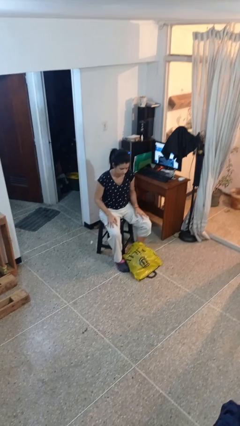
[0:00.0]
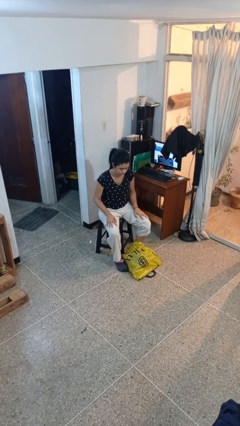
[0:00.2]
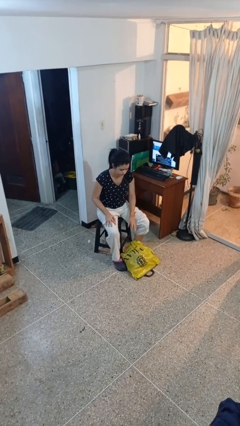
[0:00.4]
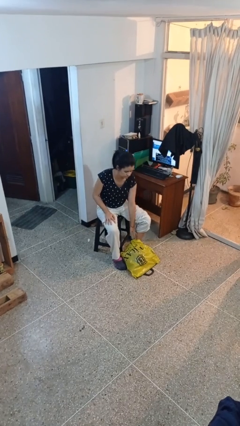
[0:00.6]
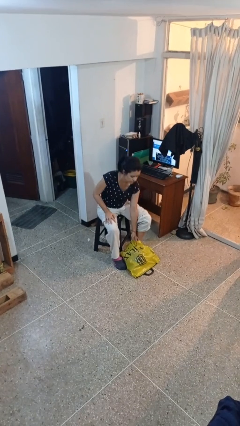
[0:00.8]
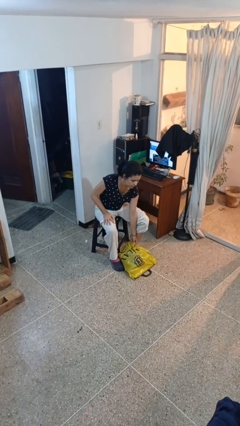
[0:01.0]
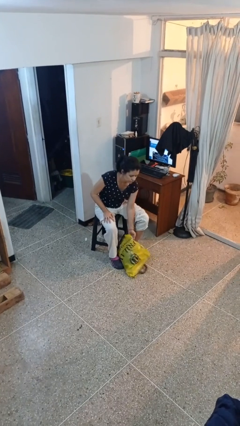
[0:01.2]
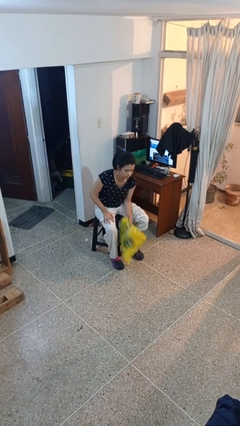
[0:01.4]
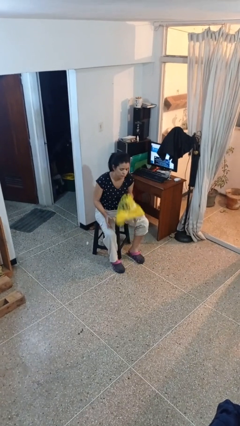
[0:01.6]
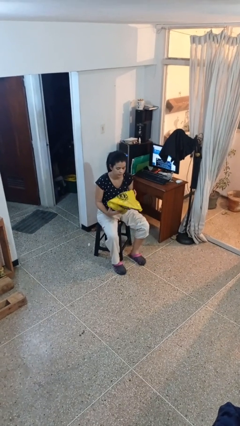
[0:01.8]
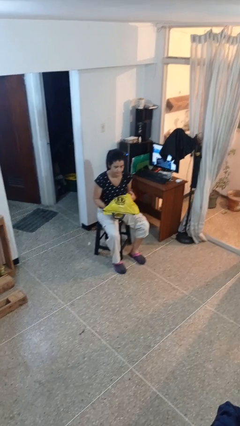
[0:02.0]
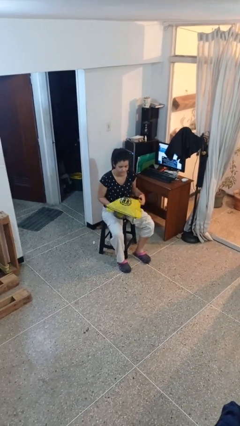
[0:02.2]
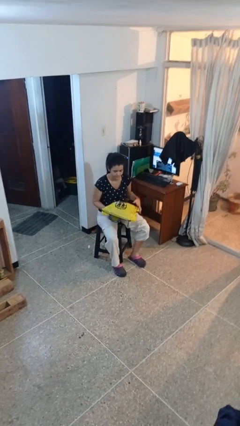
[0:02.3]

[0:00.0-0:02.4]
person picks up object from floor

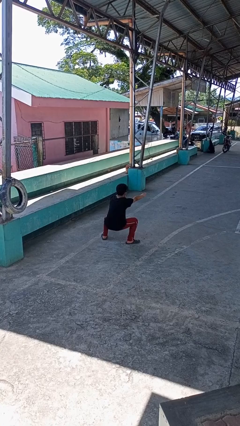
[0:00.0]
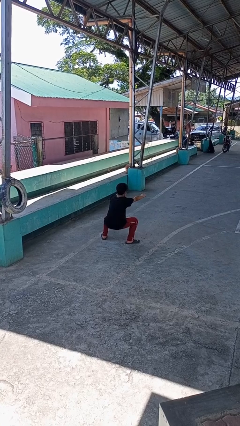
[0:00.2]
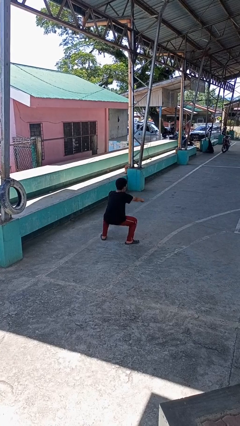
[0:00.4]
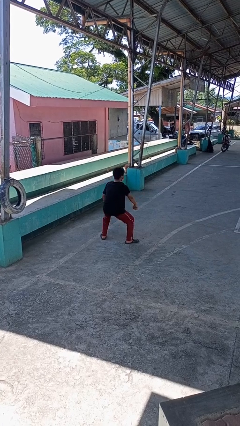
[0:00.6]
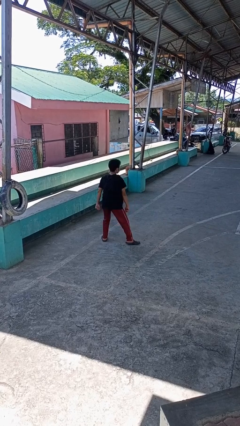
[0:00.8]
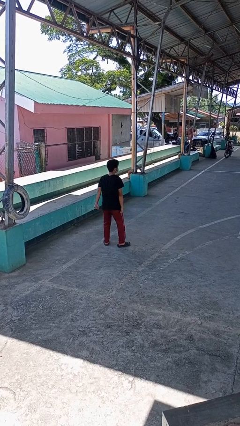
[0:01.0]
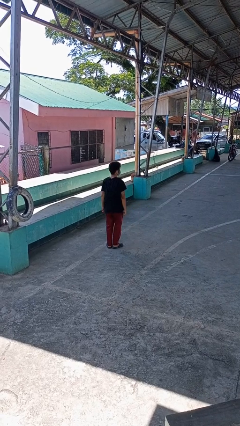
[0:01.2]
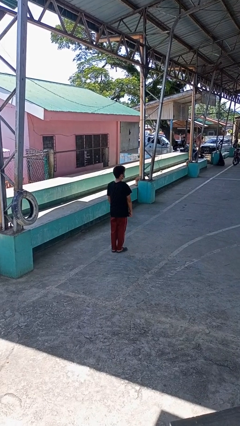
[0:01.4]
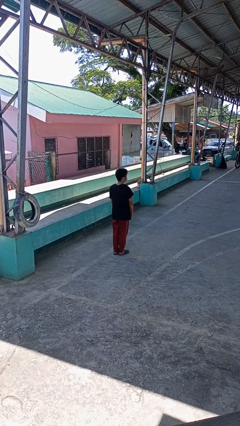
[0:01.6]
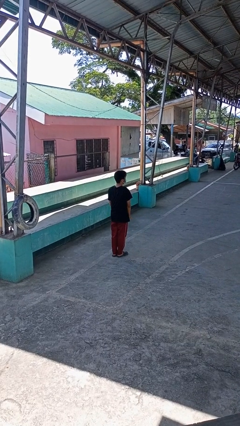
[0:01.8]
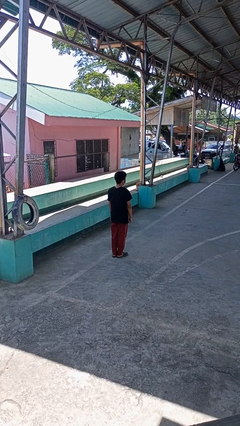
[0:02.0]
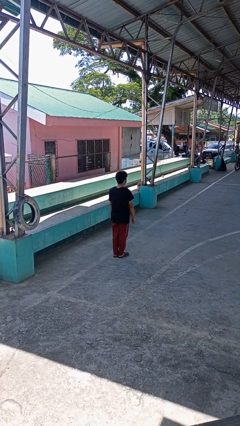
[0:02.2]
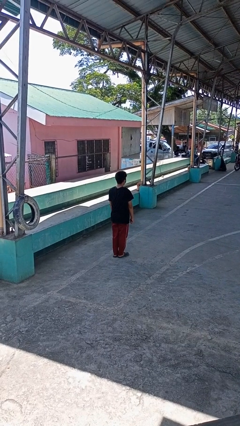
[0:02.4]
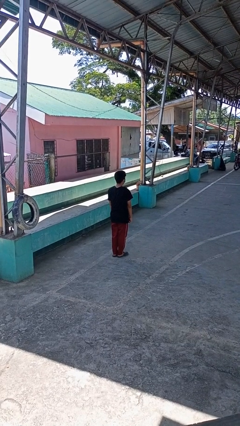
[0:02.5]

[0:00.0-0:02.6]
person stands up

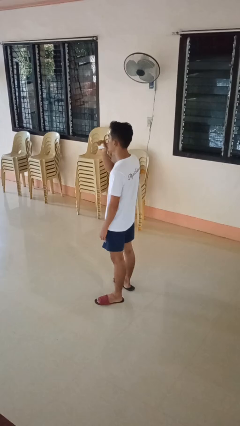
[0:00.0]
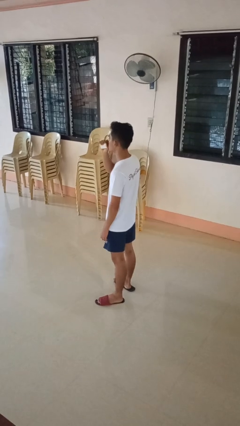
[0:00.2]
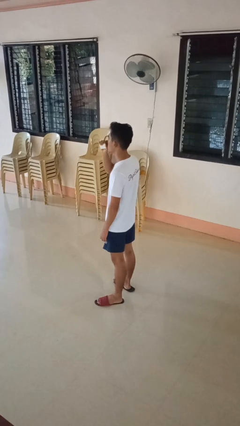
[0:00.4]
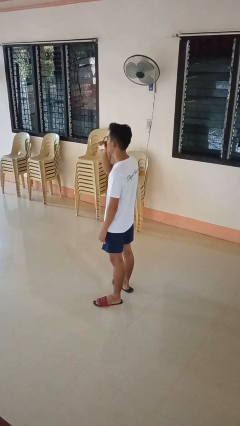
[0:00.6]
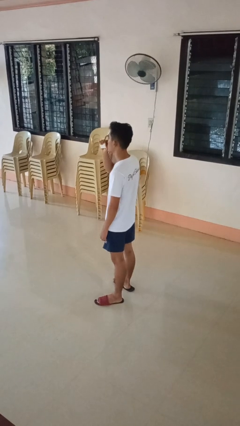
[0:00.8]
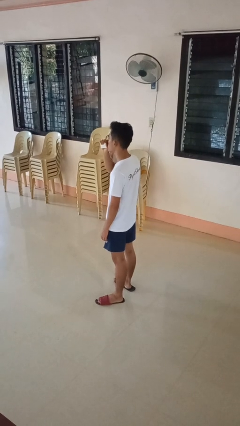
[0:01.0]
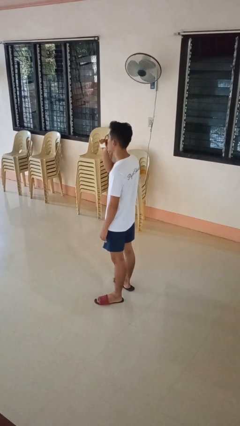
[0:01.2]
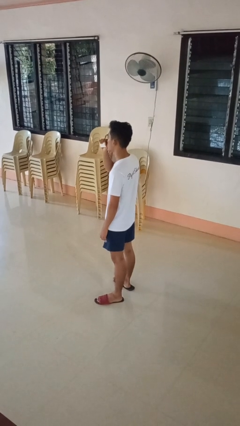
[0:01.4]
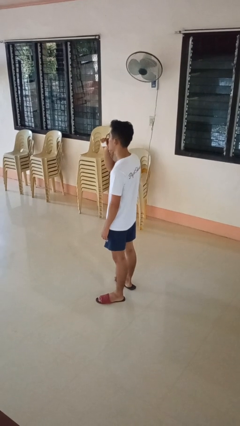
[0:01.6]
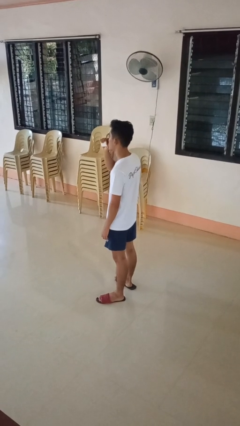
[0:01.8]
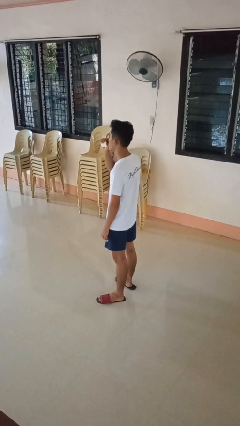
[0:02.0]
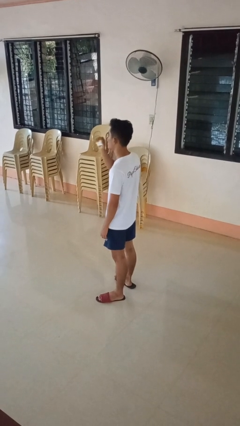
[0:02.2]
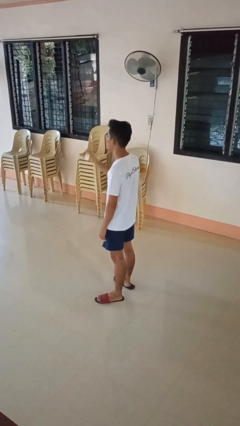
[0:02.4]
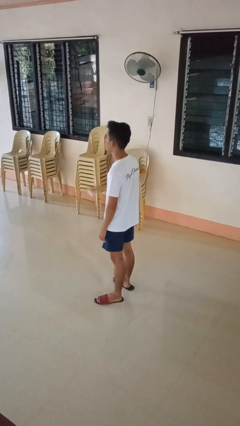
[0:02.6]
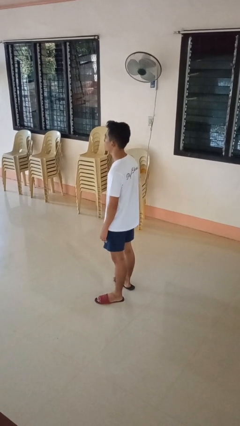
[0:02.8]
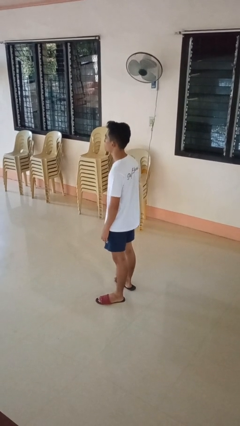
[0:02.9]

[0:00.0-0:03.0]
person vapes

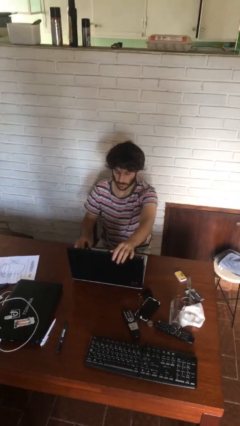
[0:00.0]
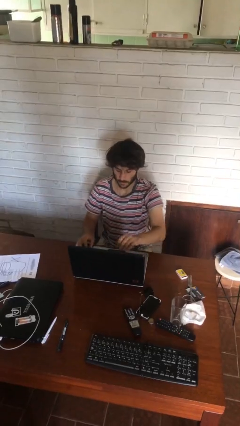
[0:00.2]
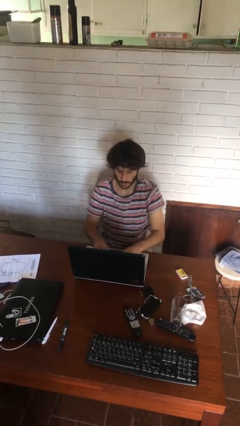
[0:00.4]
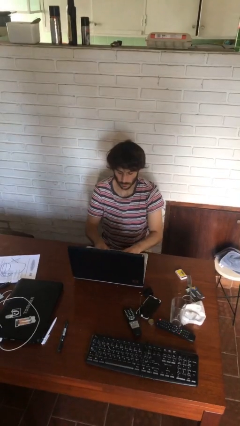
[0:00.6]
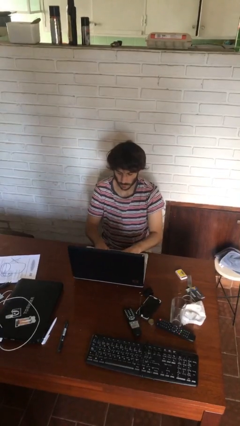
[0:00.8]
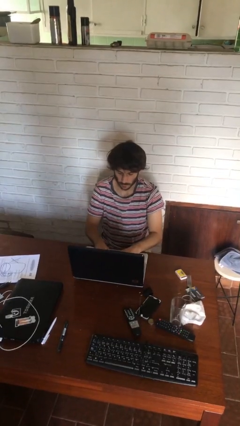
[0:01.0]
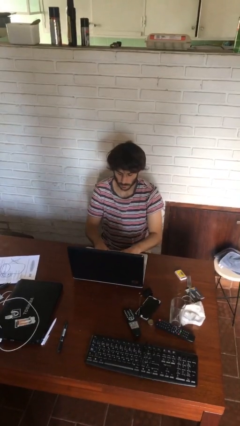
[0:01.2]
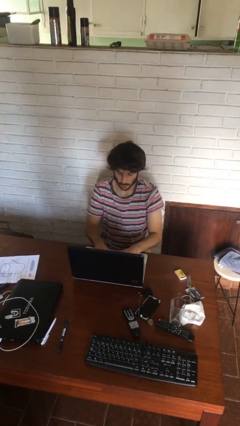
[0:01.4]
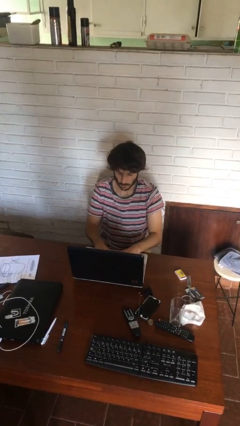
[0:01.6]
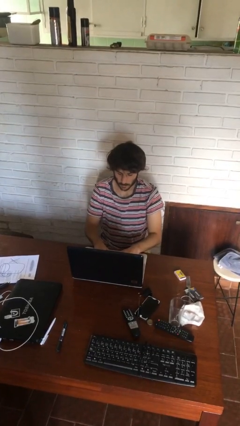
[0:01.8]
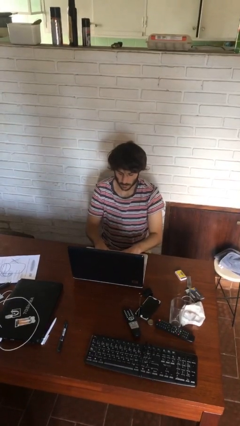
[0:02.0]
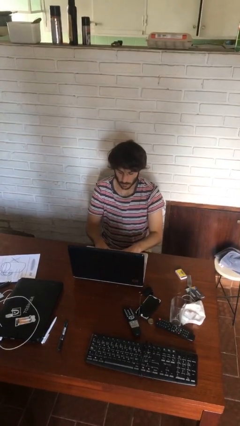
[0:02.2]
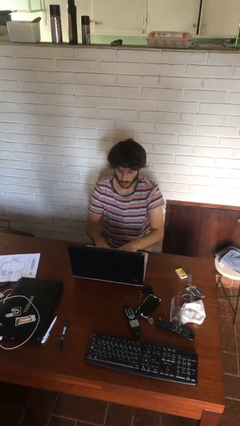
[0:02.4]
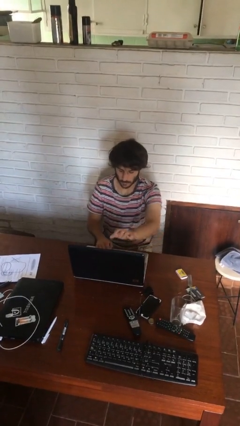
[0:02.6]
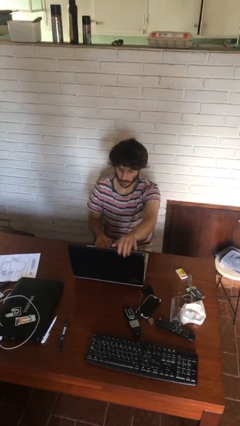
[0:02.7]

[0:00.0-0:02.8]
person interacts with laptop

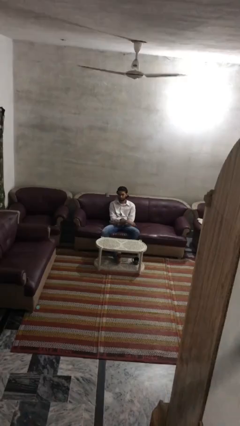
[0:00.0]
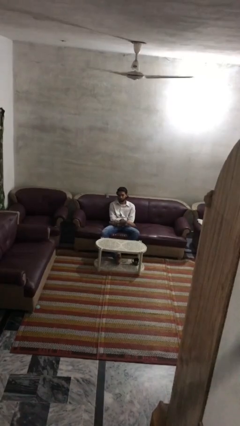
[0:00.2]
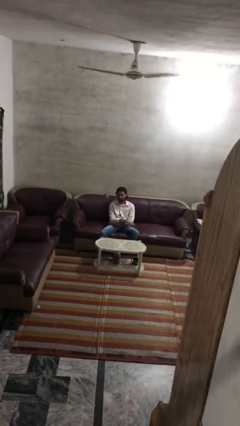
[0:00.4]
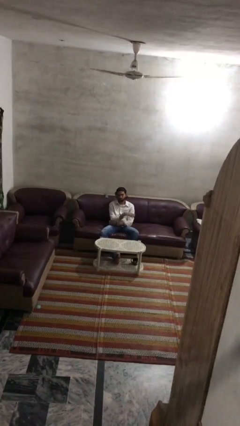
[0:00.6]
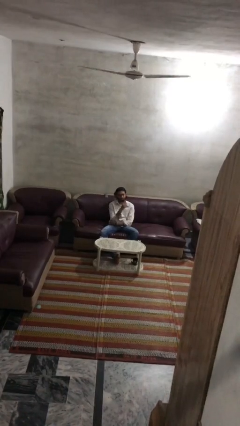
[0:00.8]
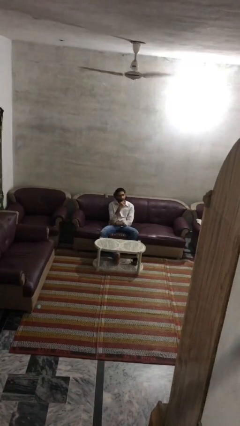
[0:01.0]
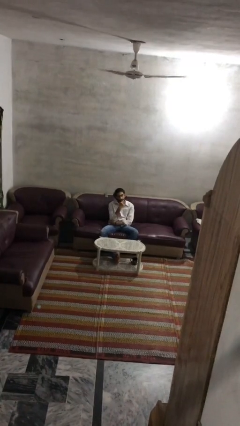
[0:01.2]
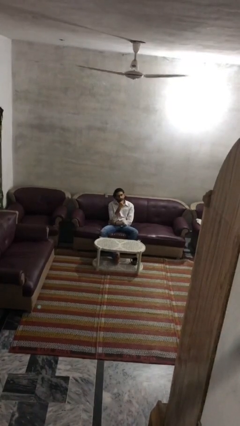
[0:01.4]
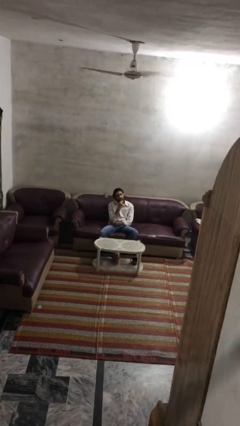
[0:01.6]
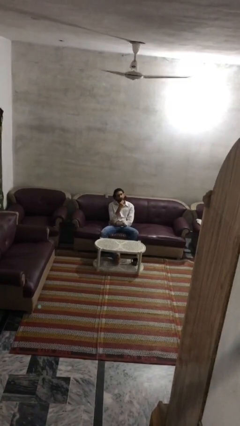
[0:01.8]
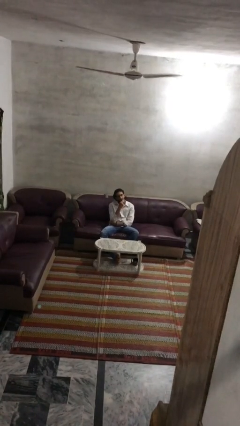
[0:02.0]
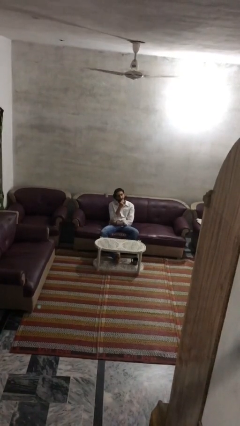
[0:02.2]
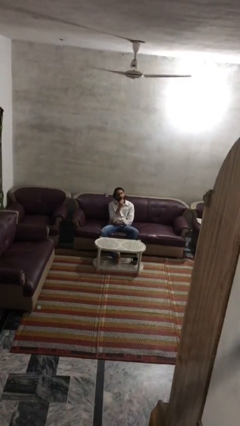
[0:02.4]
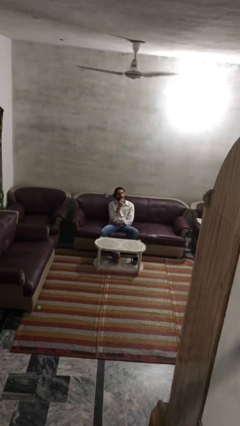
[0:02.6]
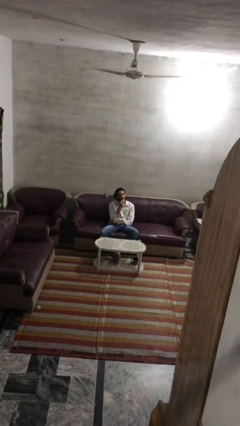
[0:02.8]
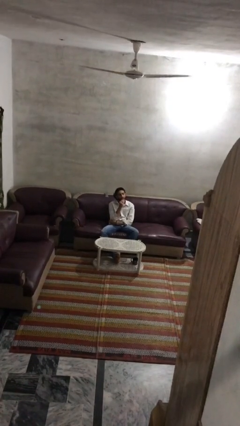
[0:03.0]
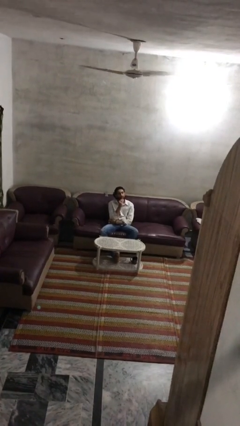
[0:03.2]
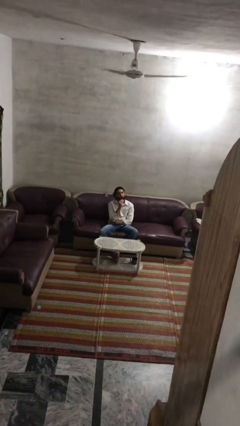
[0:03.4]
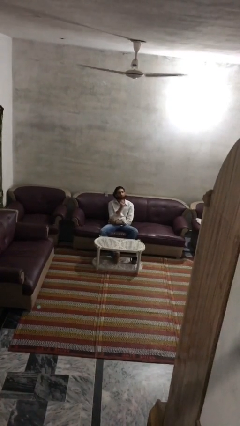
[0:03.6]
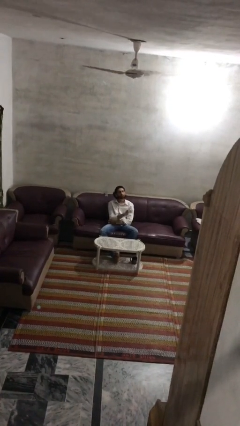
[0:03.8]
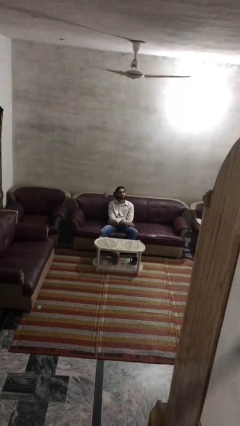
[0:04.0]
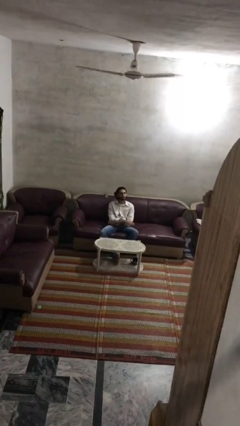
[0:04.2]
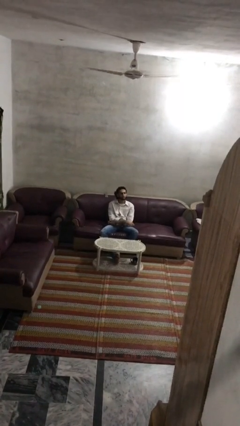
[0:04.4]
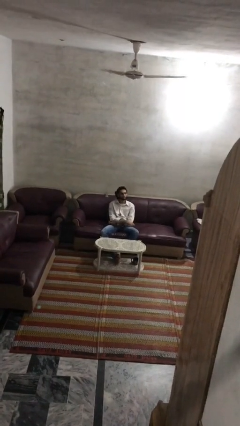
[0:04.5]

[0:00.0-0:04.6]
person strokes chin

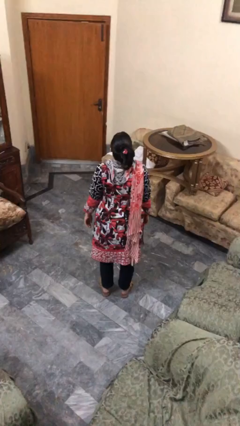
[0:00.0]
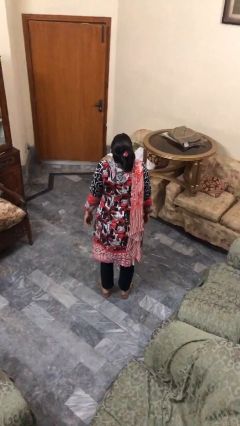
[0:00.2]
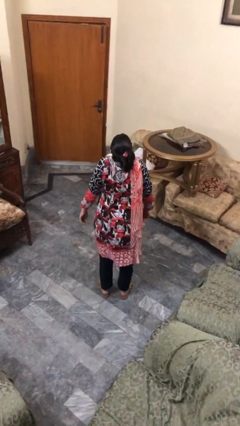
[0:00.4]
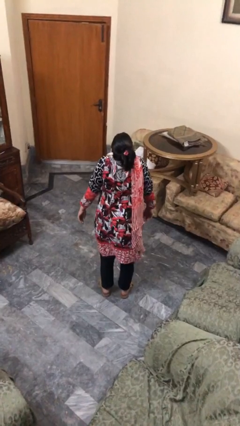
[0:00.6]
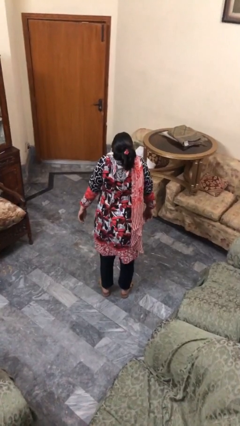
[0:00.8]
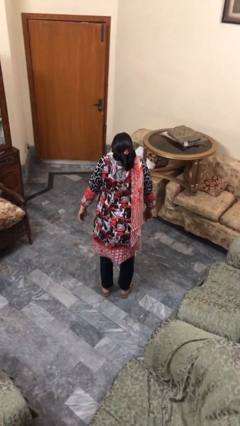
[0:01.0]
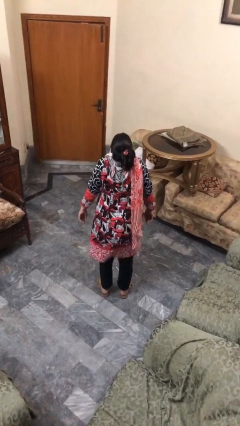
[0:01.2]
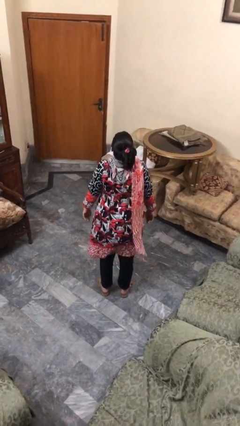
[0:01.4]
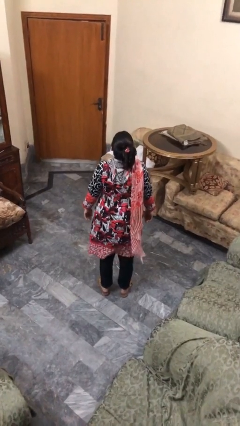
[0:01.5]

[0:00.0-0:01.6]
person shrugs

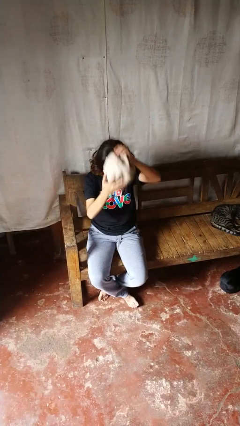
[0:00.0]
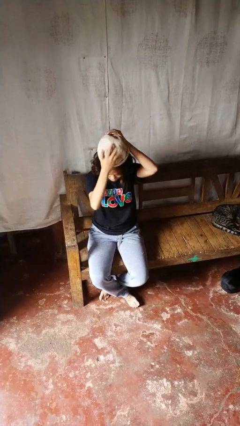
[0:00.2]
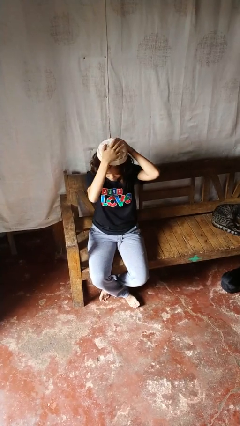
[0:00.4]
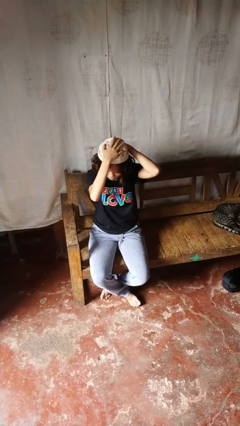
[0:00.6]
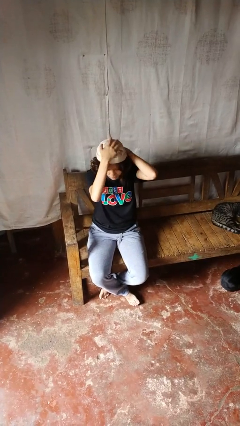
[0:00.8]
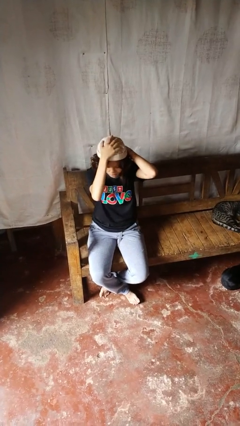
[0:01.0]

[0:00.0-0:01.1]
person puts on hat
